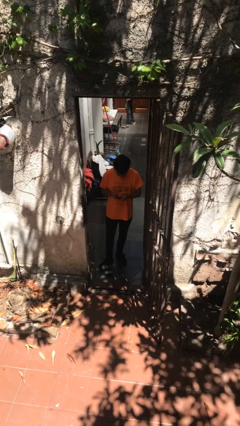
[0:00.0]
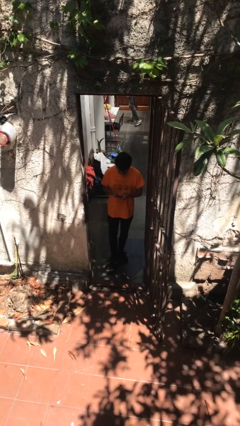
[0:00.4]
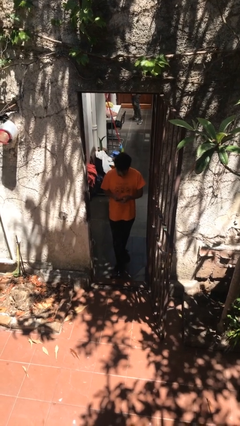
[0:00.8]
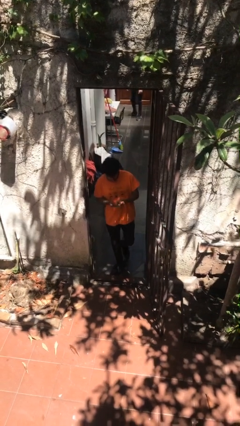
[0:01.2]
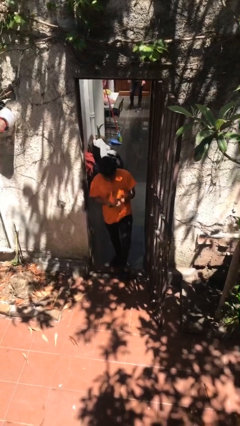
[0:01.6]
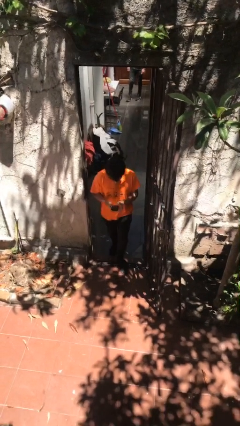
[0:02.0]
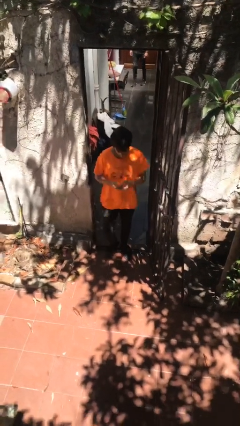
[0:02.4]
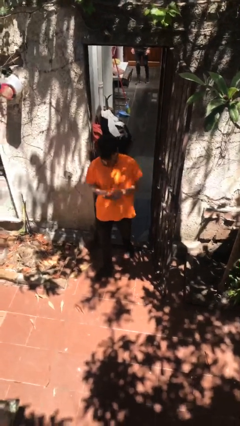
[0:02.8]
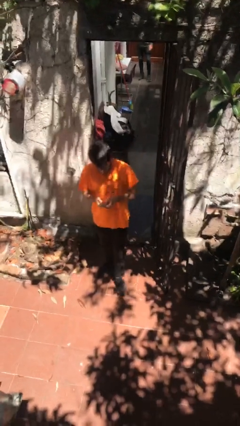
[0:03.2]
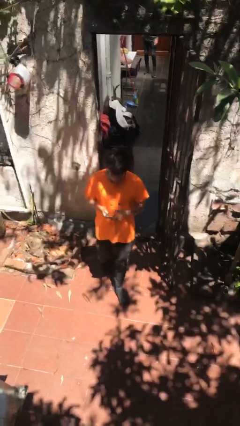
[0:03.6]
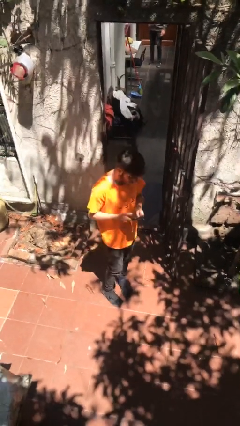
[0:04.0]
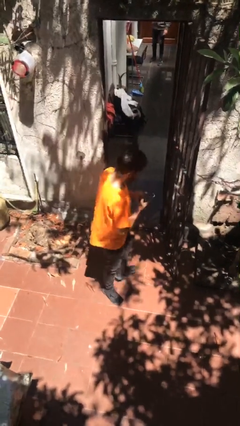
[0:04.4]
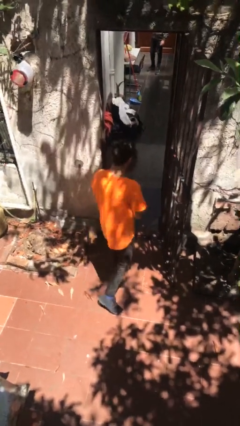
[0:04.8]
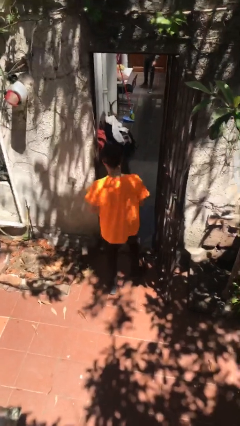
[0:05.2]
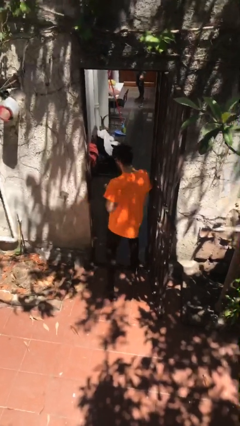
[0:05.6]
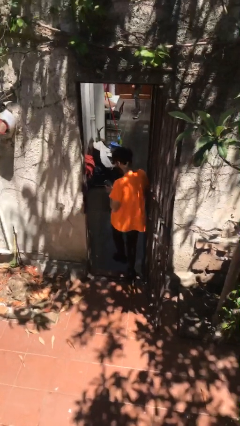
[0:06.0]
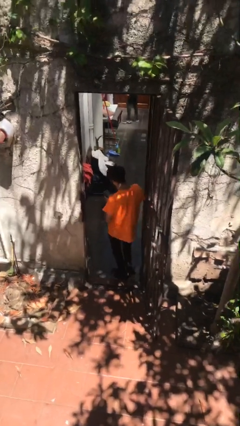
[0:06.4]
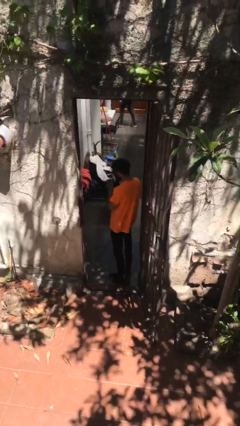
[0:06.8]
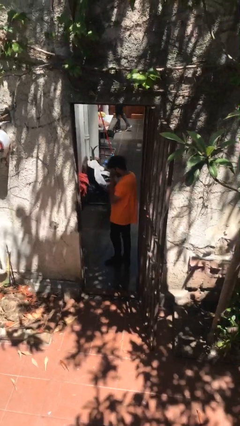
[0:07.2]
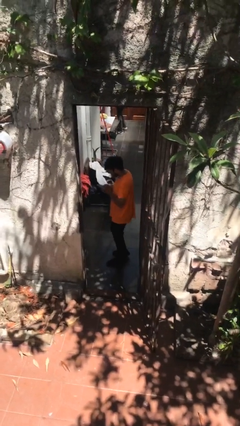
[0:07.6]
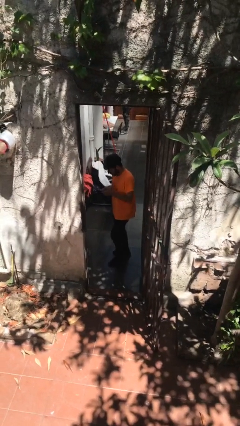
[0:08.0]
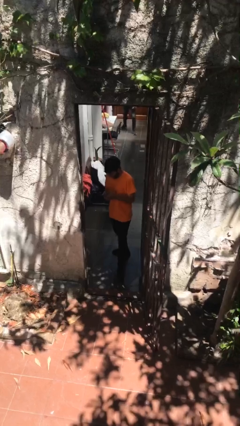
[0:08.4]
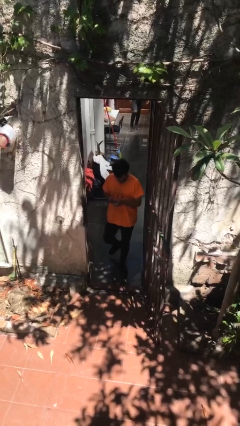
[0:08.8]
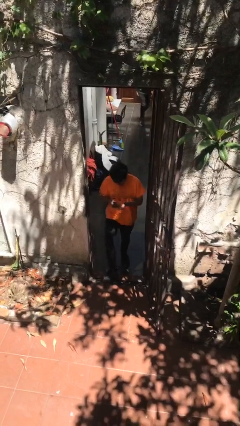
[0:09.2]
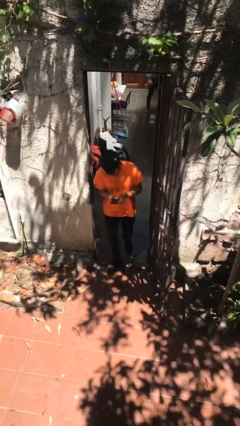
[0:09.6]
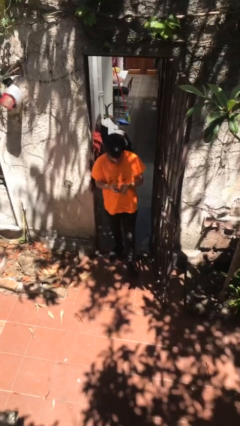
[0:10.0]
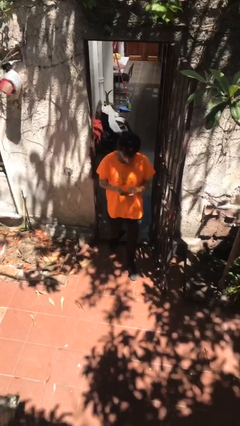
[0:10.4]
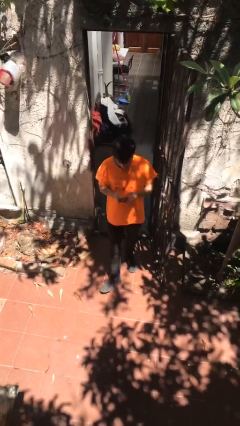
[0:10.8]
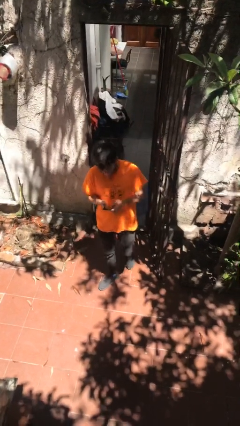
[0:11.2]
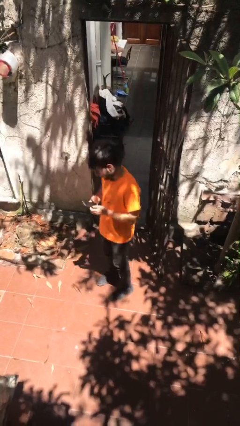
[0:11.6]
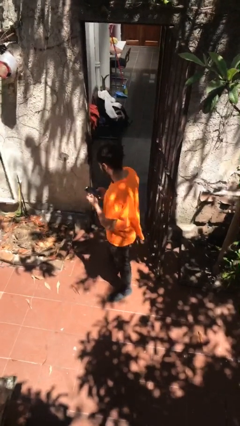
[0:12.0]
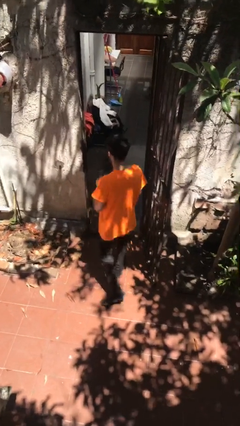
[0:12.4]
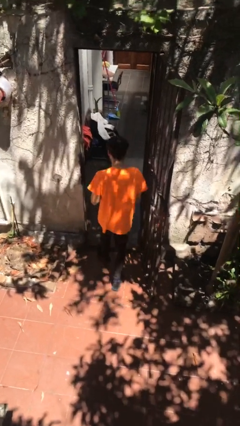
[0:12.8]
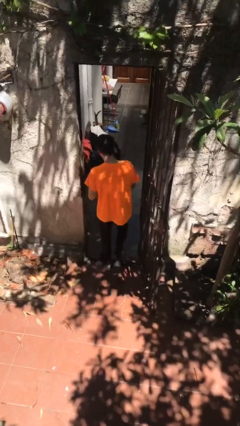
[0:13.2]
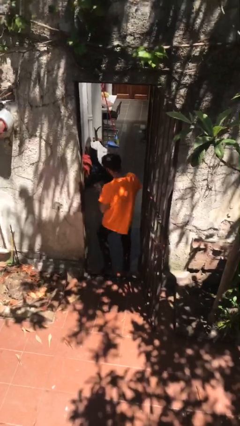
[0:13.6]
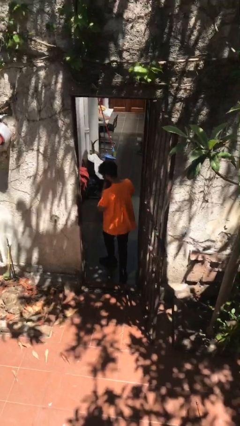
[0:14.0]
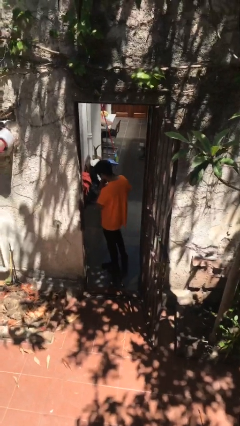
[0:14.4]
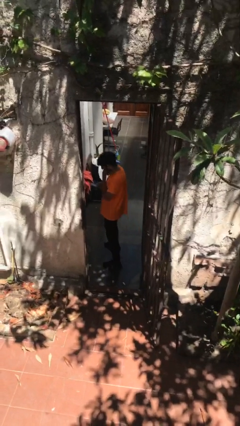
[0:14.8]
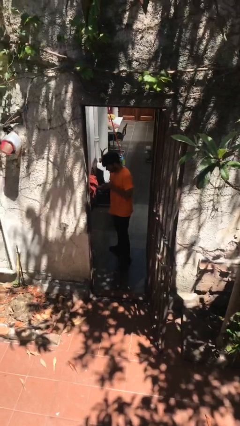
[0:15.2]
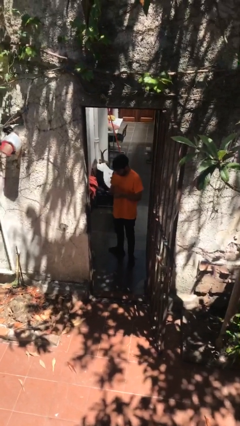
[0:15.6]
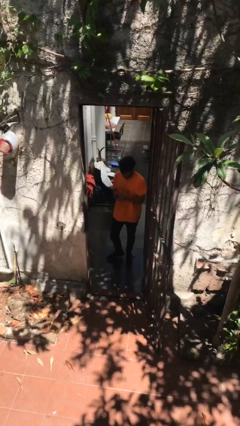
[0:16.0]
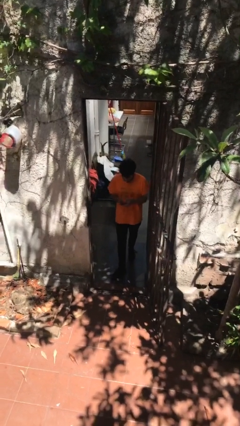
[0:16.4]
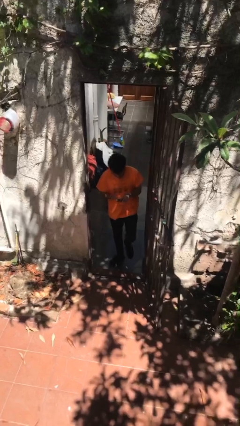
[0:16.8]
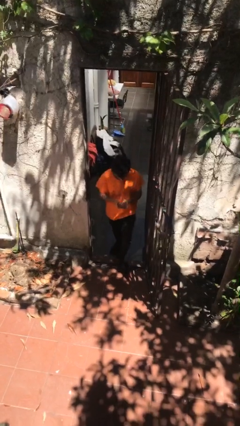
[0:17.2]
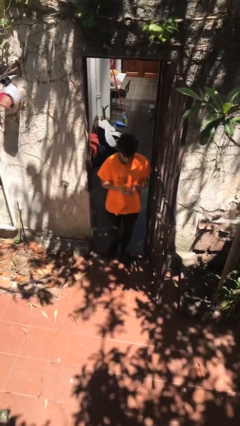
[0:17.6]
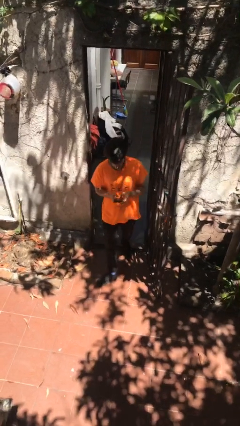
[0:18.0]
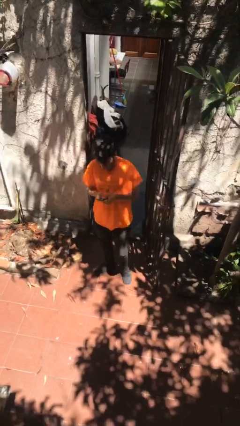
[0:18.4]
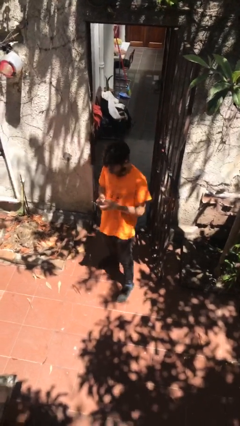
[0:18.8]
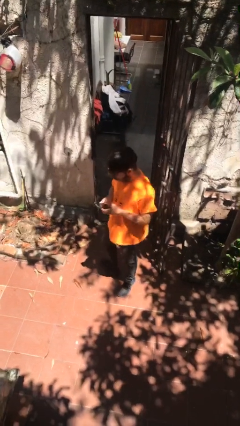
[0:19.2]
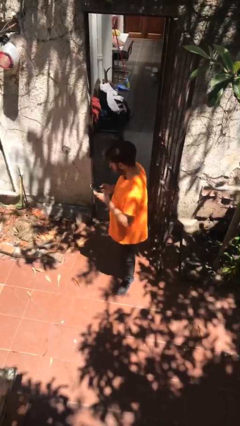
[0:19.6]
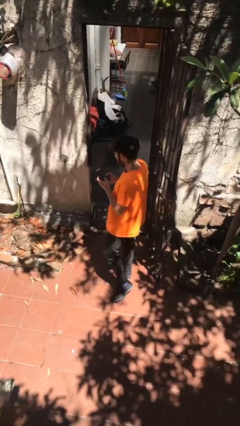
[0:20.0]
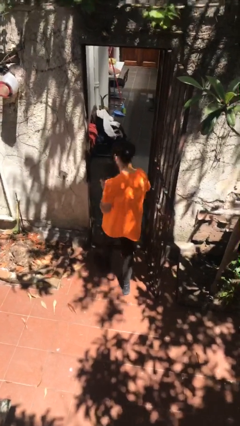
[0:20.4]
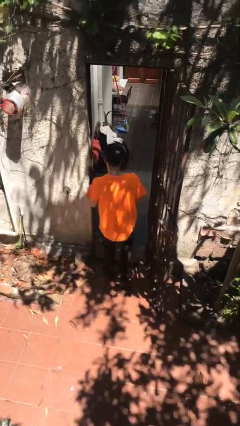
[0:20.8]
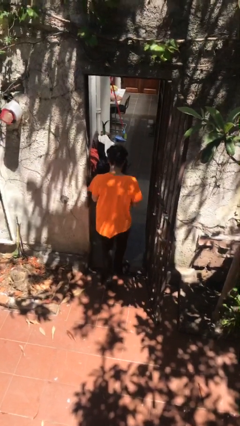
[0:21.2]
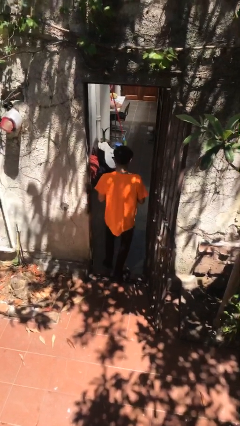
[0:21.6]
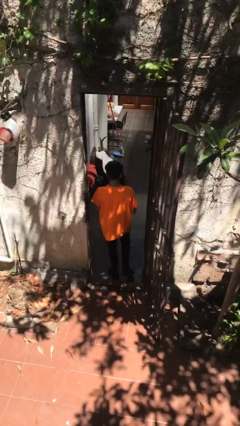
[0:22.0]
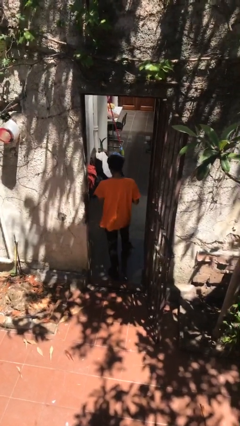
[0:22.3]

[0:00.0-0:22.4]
person texts on phone

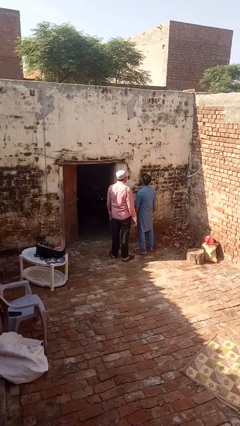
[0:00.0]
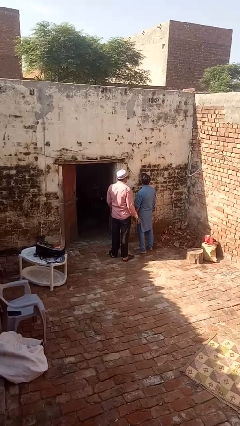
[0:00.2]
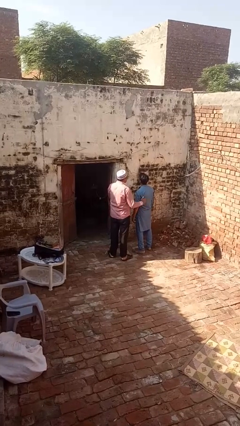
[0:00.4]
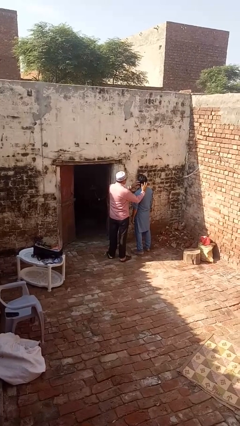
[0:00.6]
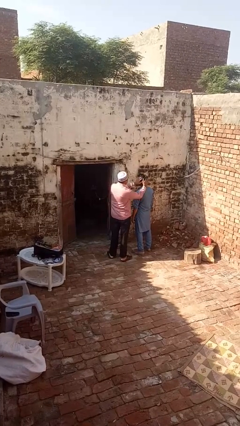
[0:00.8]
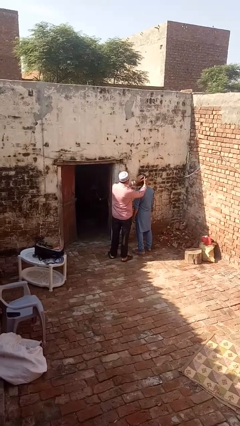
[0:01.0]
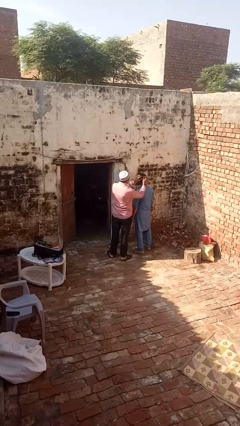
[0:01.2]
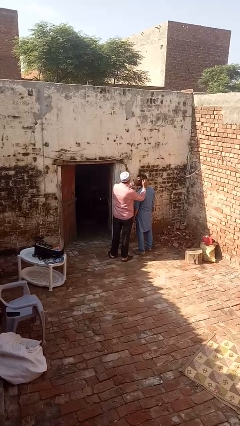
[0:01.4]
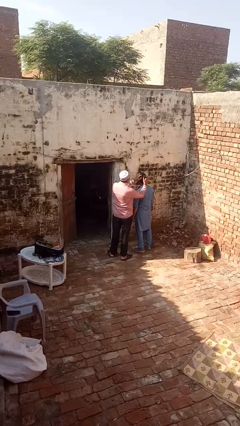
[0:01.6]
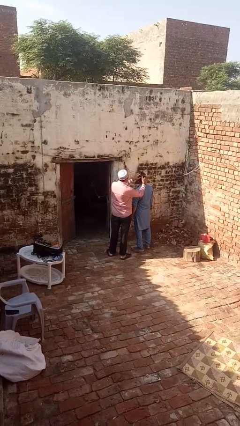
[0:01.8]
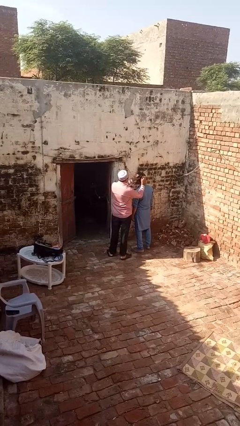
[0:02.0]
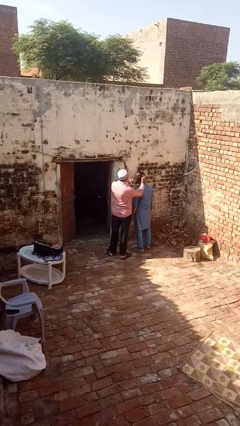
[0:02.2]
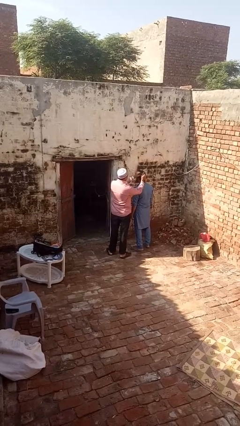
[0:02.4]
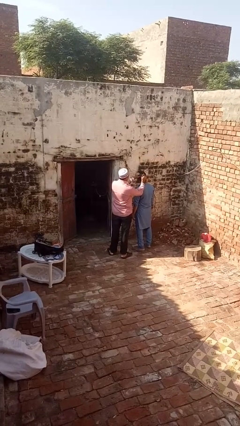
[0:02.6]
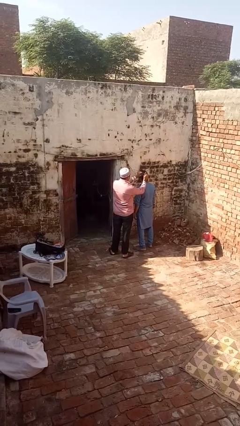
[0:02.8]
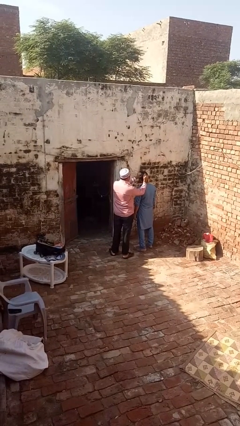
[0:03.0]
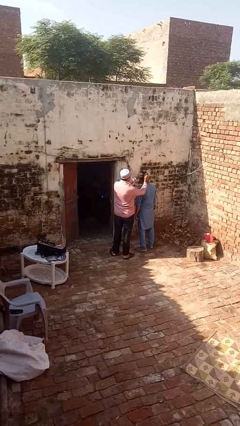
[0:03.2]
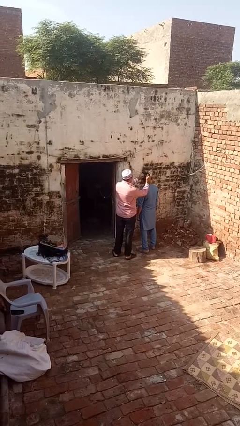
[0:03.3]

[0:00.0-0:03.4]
person grabs person by hair

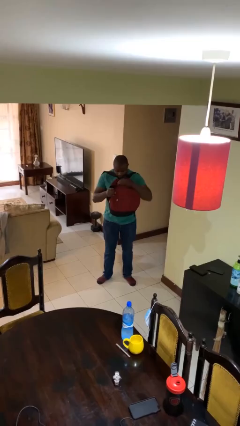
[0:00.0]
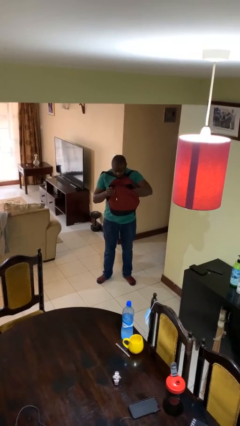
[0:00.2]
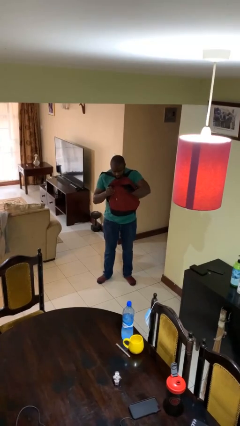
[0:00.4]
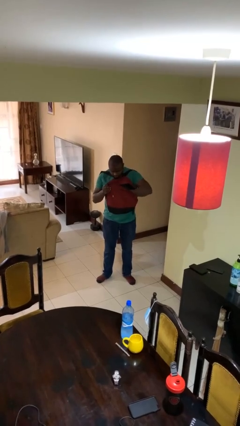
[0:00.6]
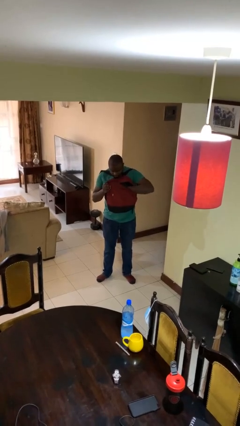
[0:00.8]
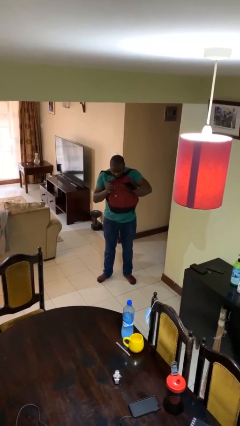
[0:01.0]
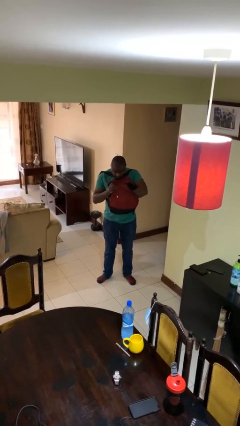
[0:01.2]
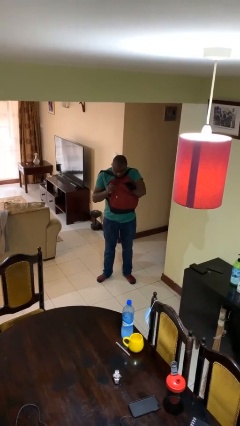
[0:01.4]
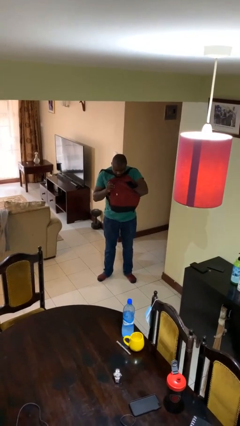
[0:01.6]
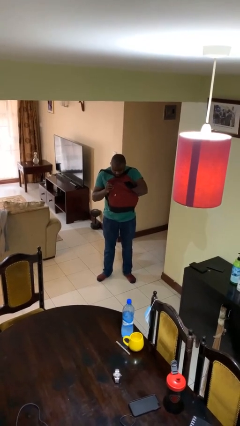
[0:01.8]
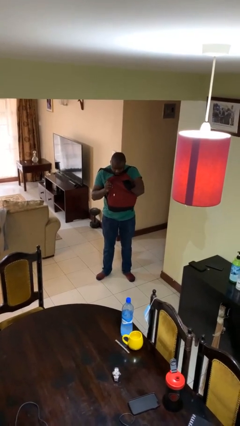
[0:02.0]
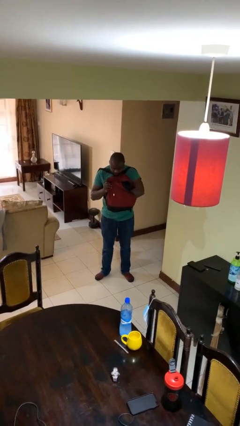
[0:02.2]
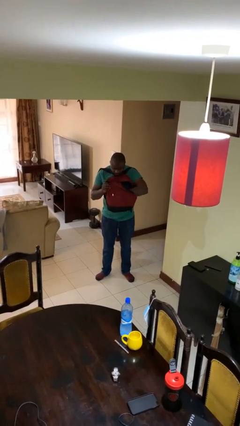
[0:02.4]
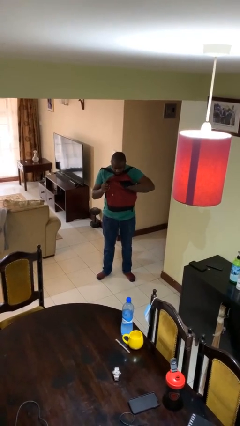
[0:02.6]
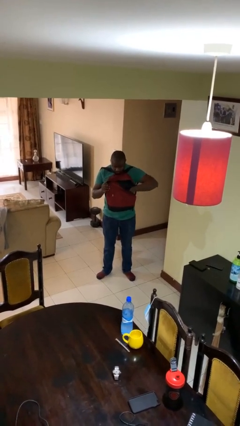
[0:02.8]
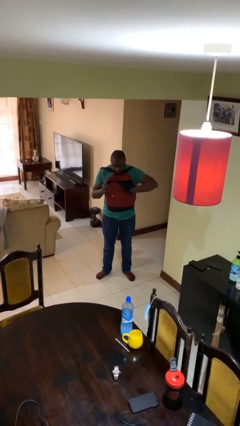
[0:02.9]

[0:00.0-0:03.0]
person searches in backpack

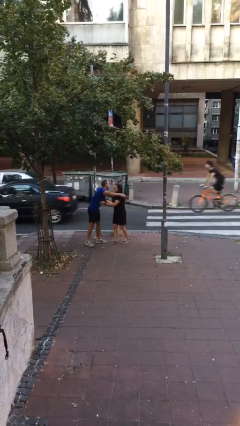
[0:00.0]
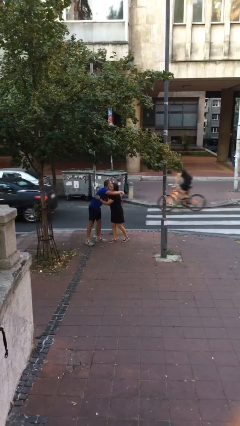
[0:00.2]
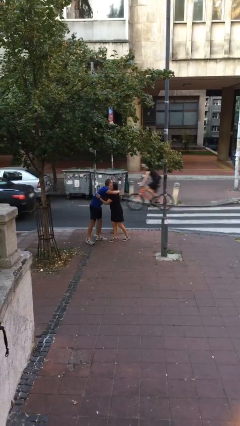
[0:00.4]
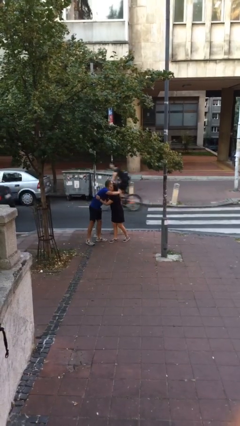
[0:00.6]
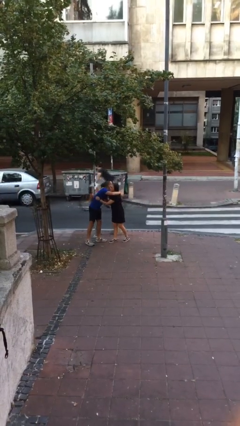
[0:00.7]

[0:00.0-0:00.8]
person embraces person
